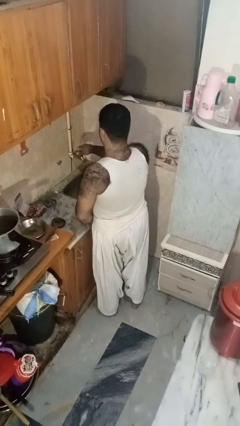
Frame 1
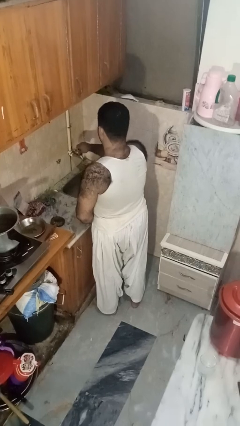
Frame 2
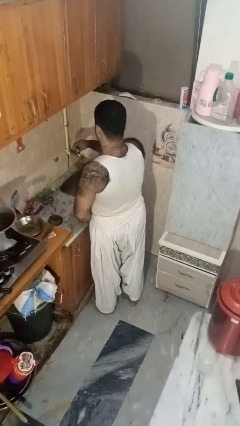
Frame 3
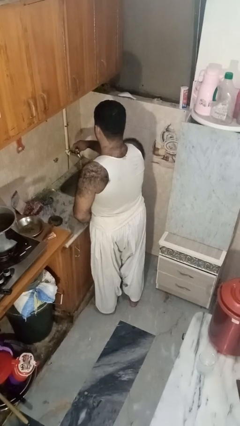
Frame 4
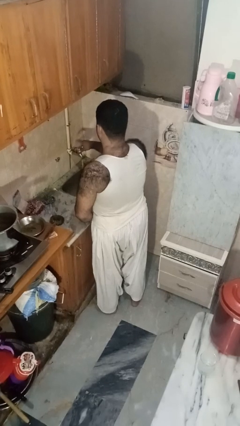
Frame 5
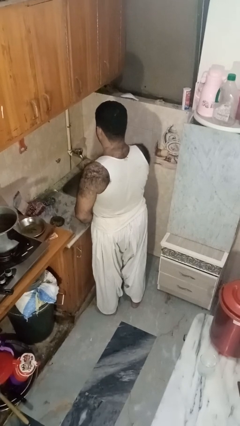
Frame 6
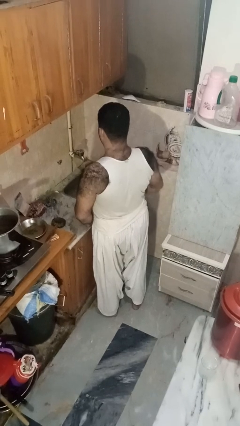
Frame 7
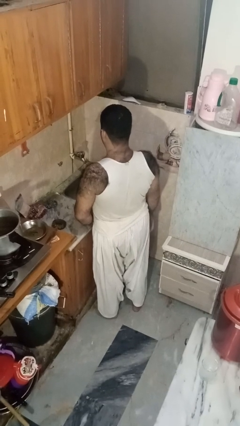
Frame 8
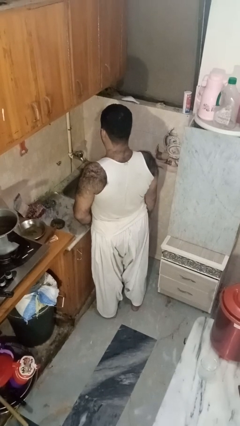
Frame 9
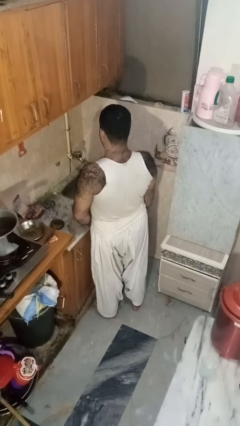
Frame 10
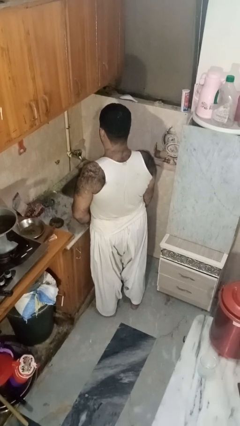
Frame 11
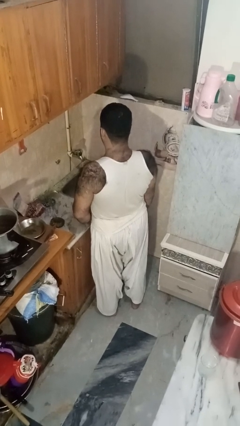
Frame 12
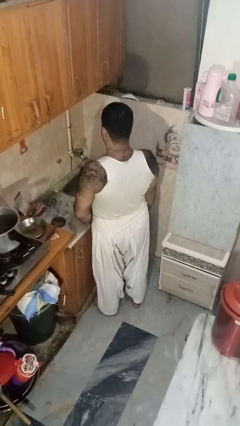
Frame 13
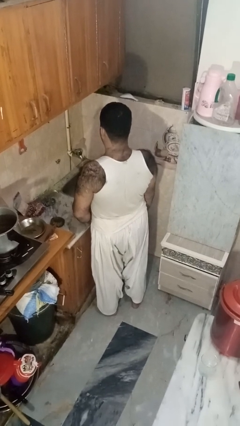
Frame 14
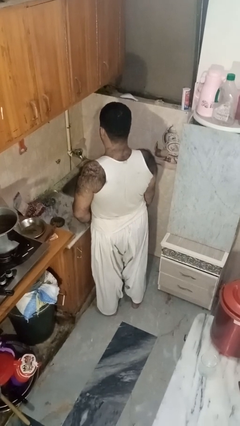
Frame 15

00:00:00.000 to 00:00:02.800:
person turns on faucet

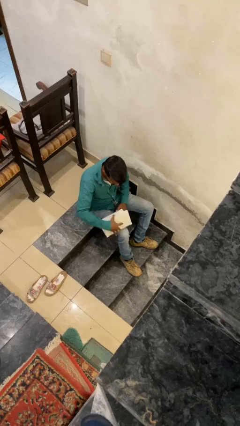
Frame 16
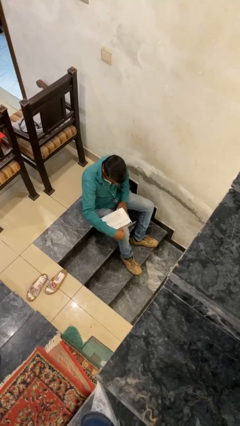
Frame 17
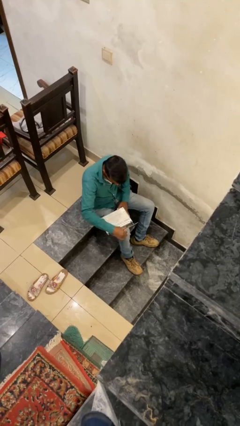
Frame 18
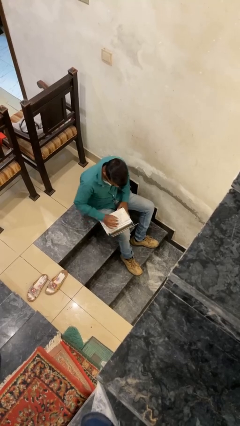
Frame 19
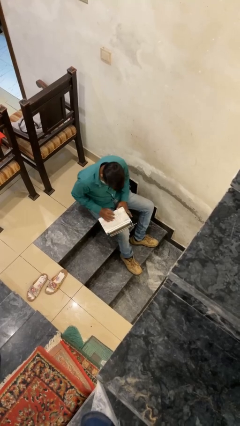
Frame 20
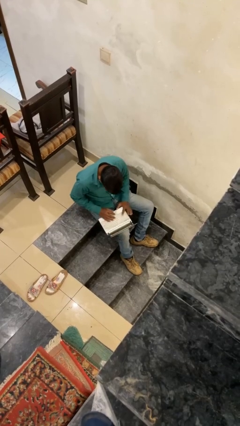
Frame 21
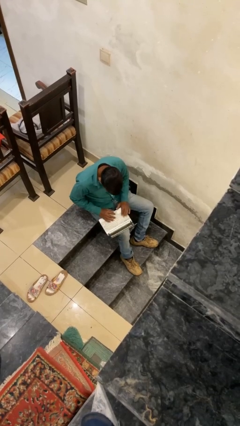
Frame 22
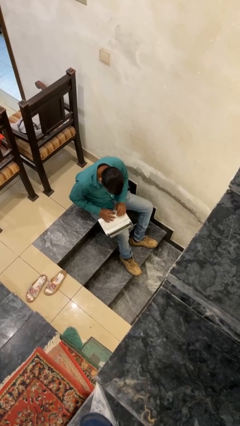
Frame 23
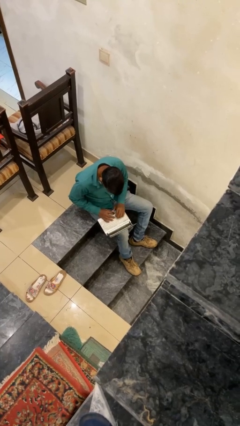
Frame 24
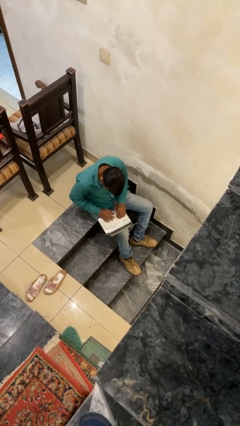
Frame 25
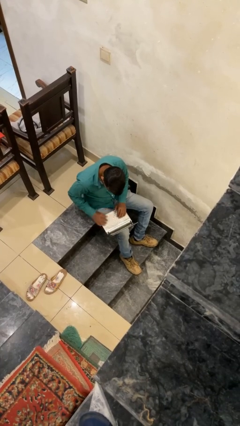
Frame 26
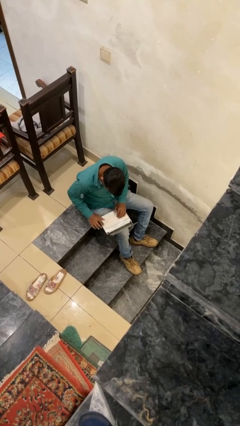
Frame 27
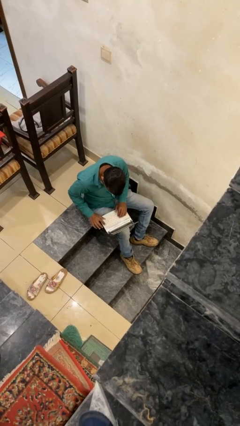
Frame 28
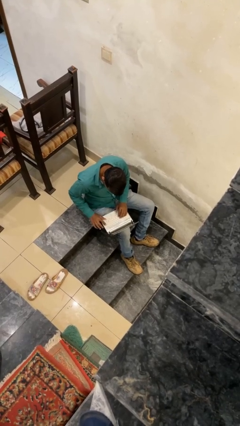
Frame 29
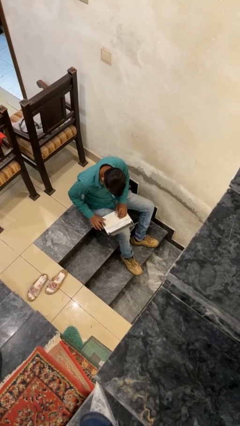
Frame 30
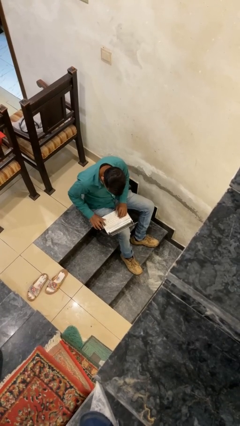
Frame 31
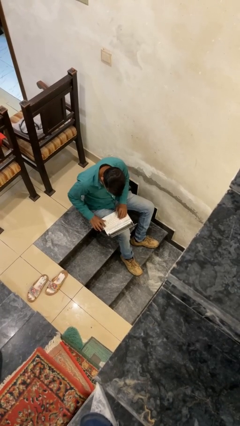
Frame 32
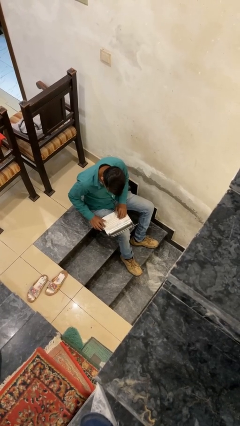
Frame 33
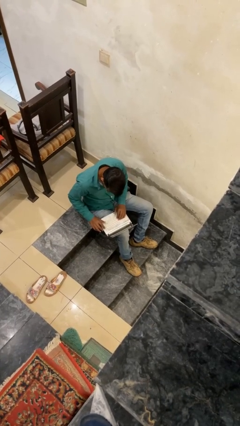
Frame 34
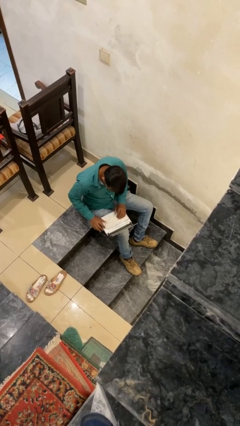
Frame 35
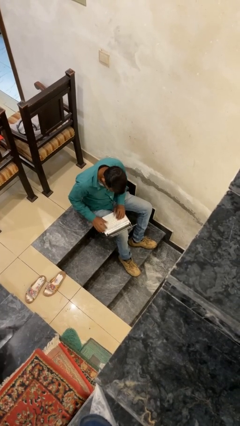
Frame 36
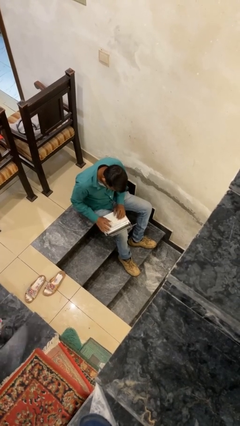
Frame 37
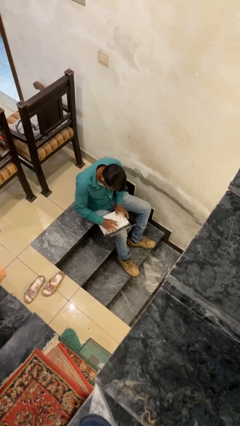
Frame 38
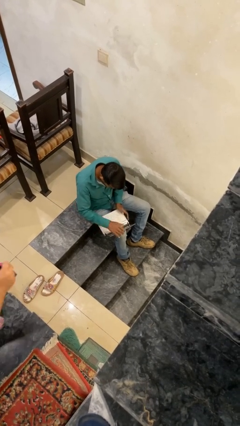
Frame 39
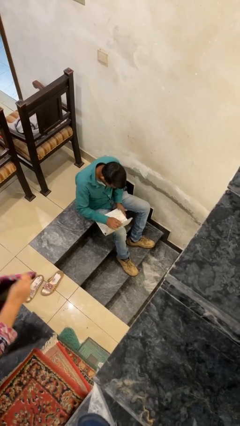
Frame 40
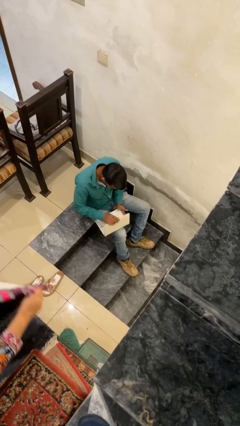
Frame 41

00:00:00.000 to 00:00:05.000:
person interacts with laptop

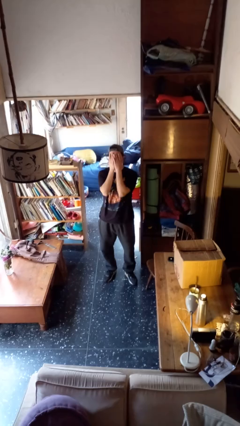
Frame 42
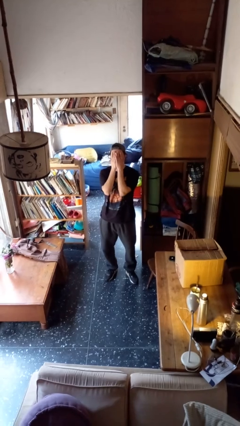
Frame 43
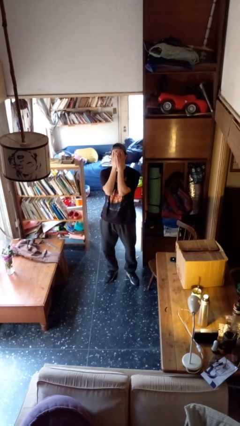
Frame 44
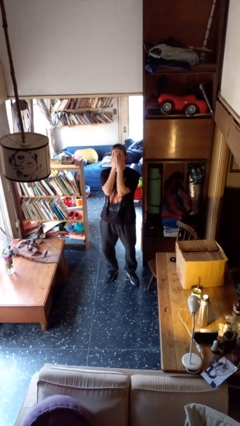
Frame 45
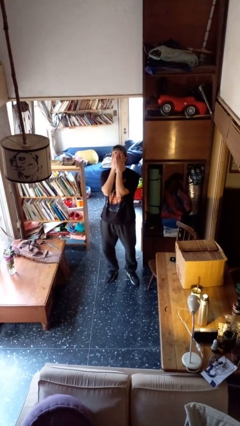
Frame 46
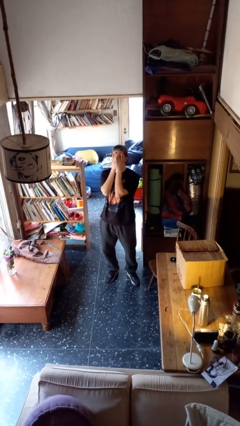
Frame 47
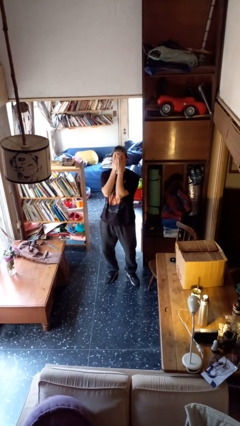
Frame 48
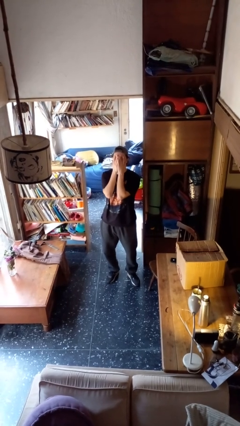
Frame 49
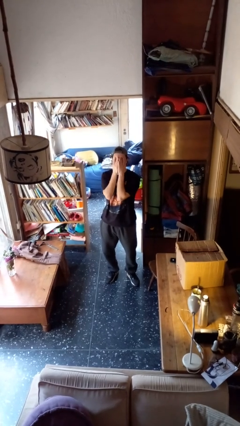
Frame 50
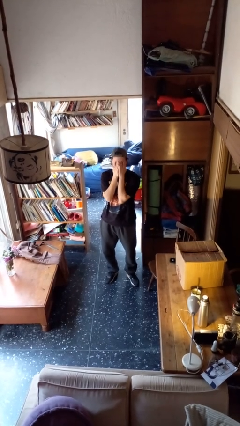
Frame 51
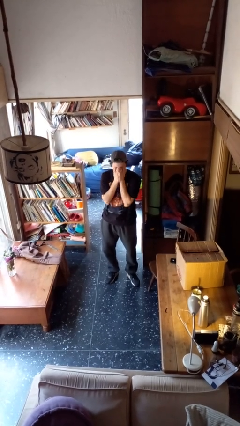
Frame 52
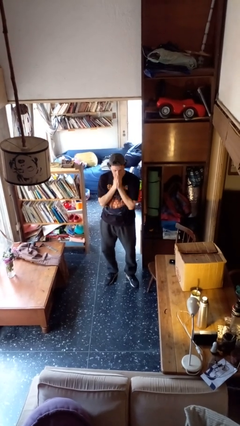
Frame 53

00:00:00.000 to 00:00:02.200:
person covers face with hands

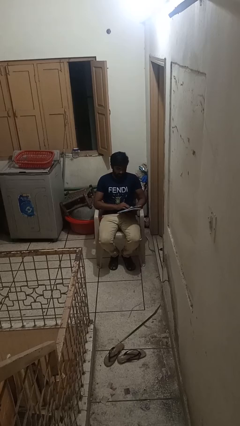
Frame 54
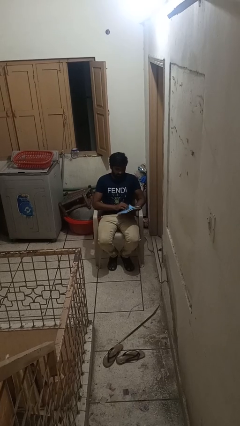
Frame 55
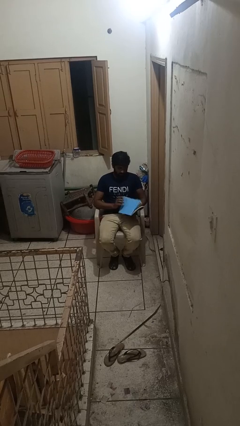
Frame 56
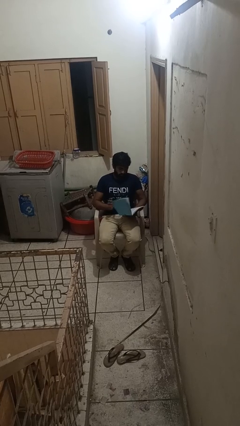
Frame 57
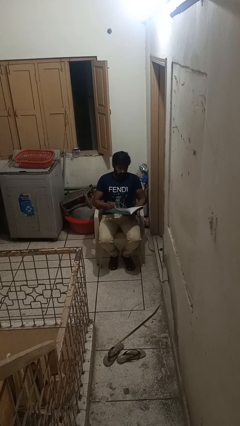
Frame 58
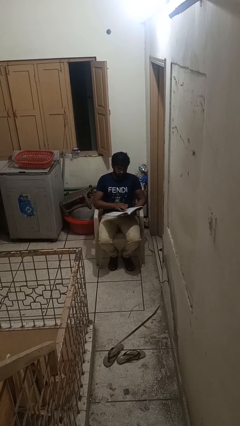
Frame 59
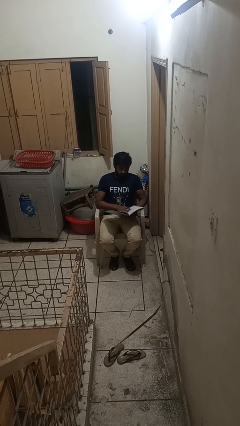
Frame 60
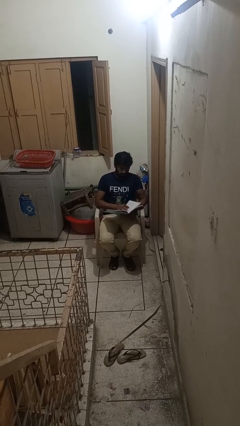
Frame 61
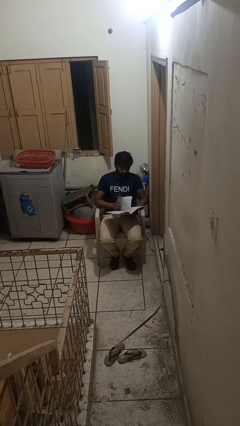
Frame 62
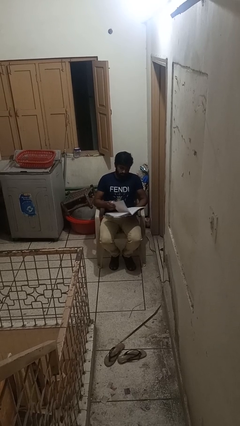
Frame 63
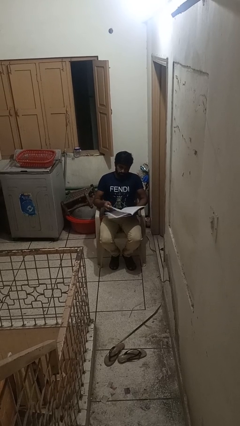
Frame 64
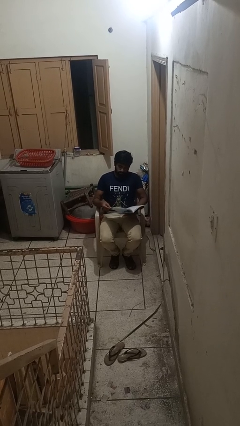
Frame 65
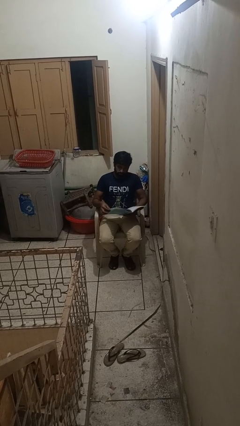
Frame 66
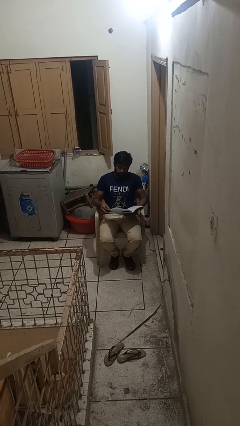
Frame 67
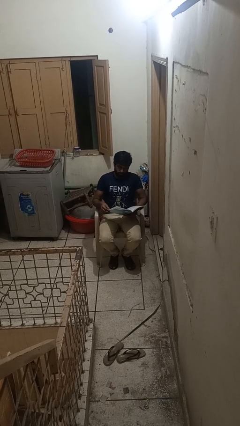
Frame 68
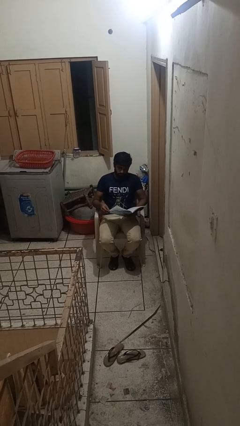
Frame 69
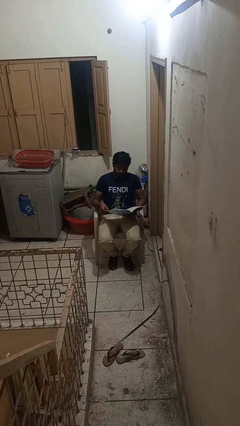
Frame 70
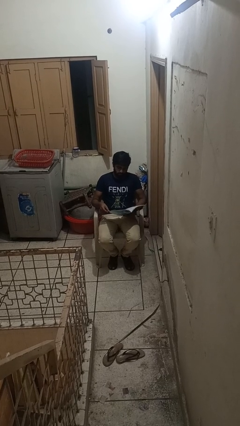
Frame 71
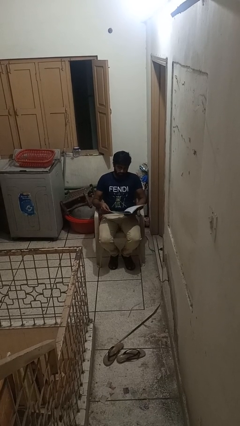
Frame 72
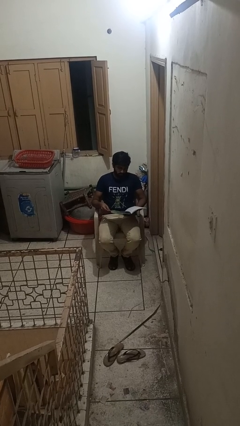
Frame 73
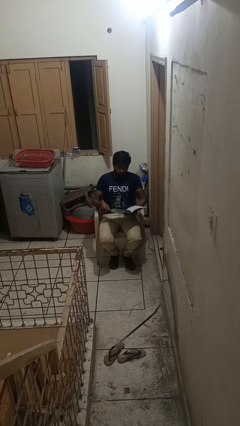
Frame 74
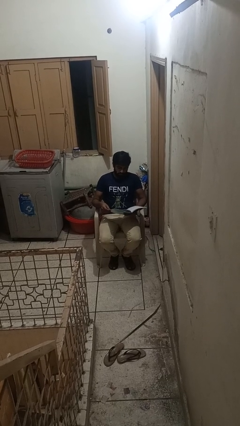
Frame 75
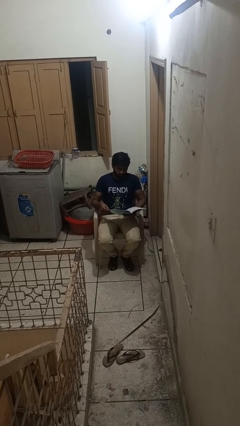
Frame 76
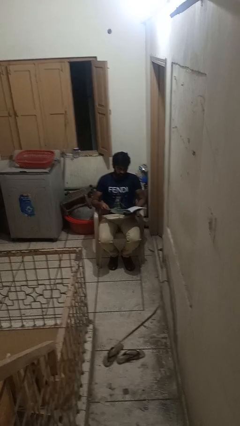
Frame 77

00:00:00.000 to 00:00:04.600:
person reads book

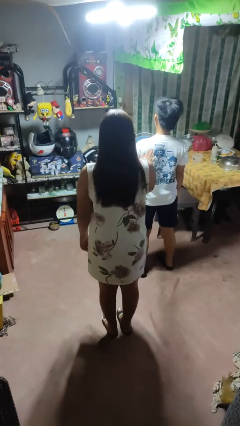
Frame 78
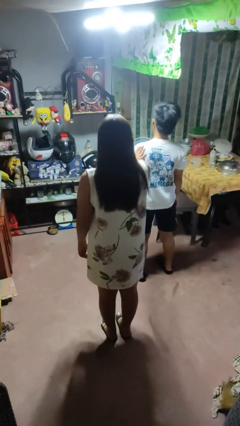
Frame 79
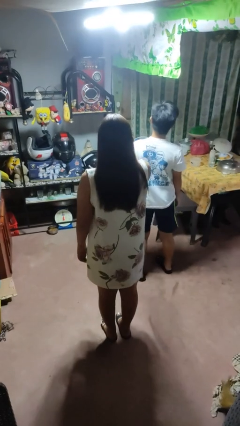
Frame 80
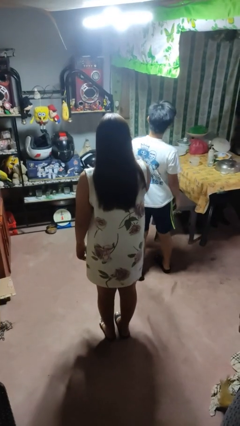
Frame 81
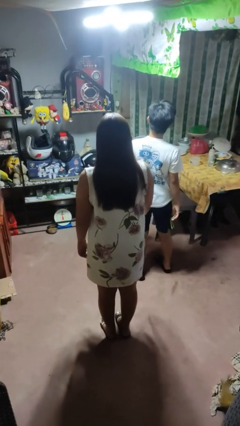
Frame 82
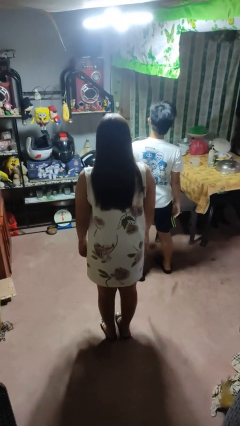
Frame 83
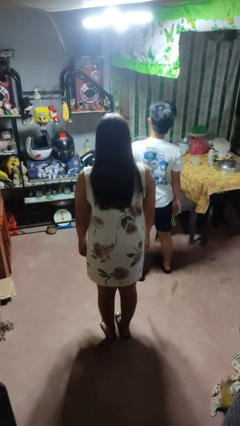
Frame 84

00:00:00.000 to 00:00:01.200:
person shoves person

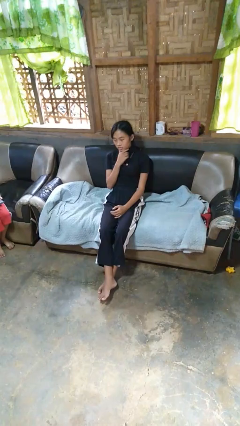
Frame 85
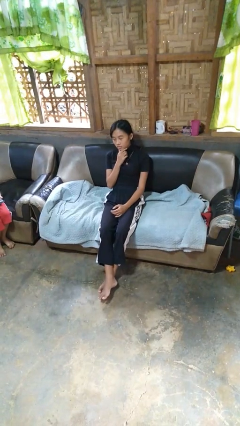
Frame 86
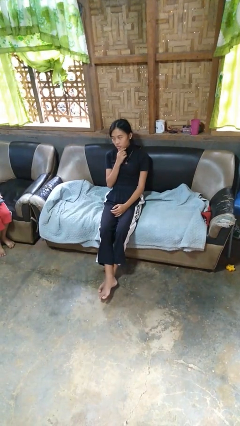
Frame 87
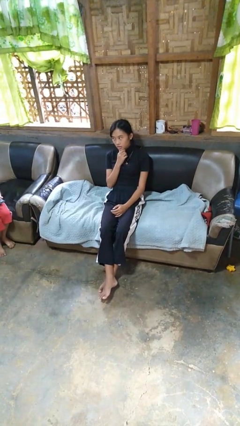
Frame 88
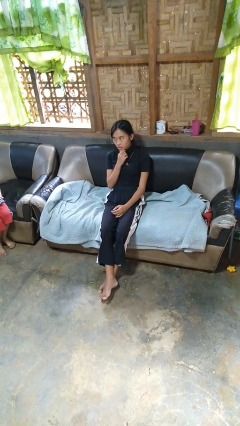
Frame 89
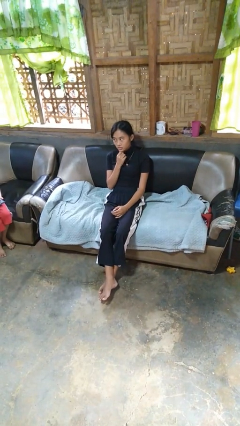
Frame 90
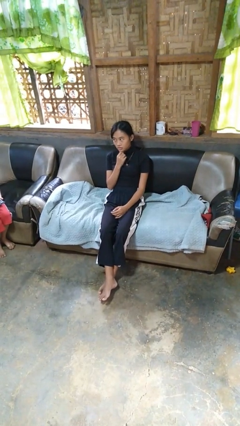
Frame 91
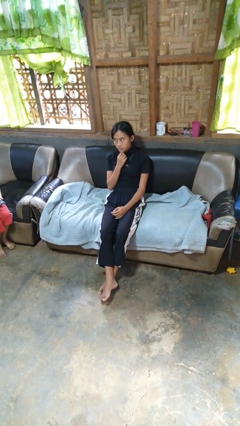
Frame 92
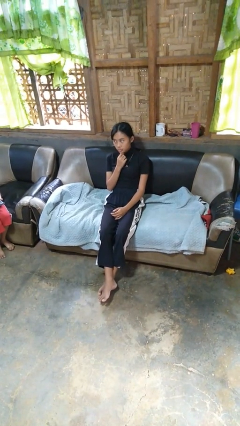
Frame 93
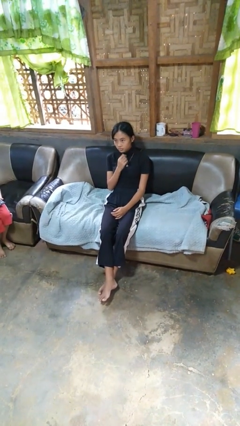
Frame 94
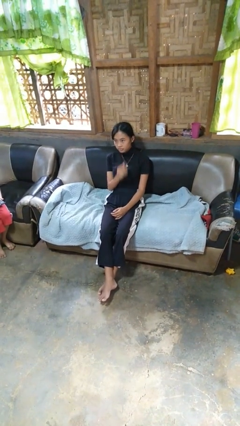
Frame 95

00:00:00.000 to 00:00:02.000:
person strokes chin
